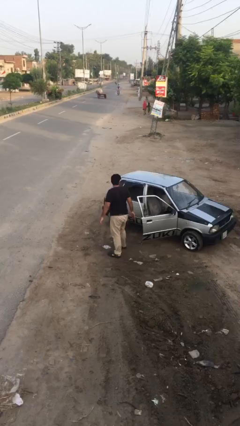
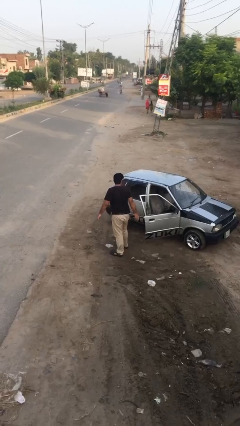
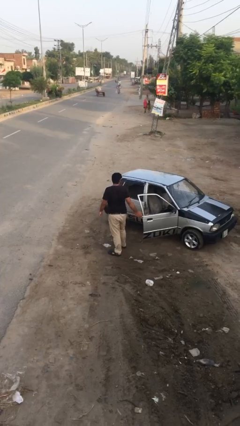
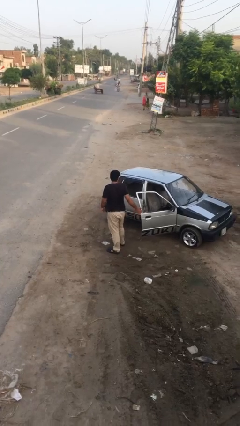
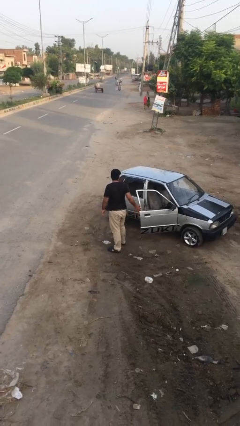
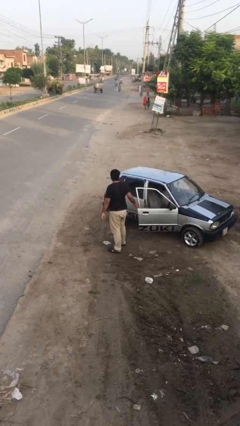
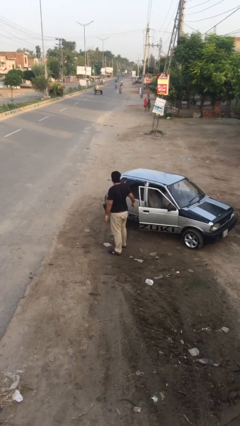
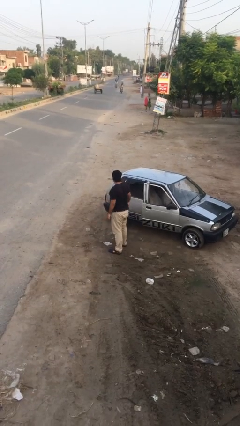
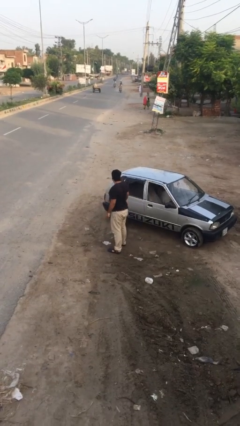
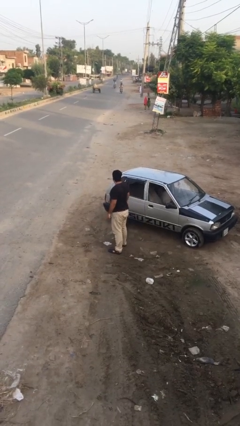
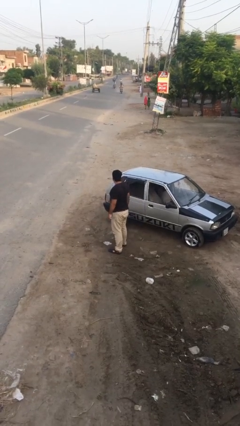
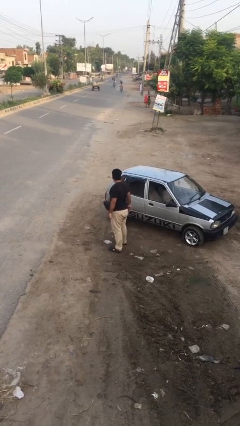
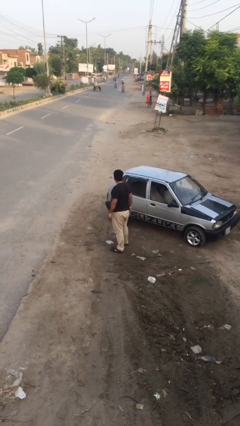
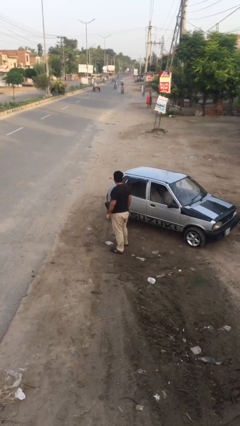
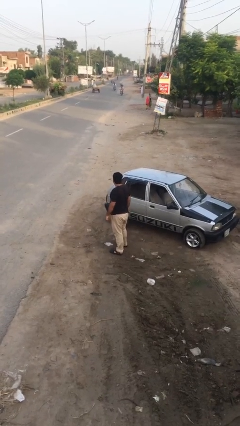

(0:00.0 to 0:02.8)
person closes car door

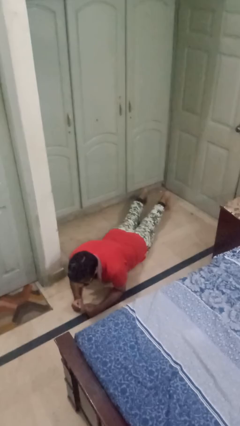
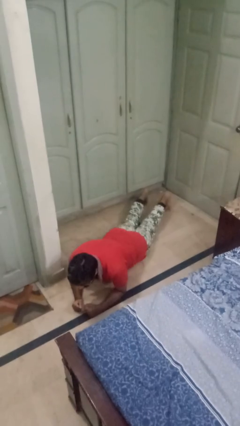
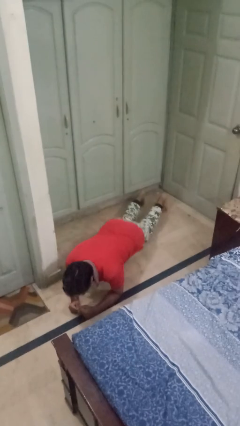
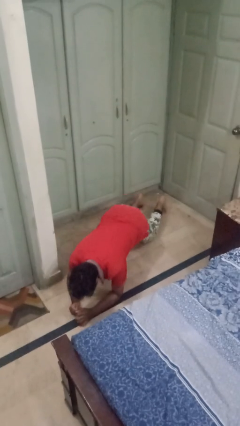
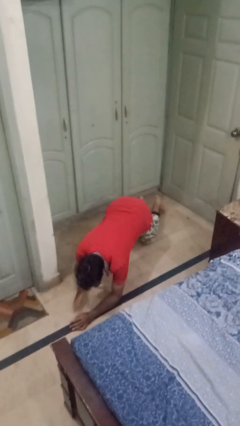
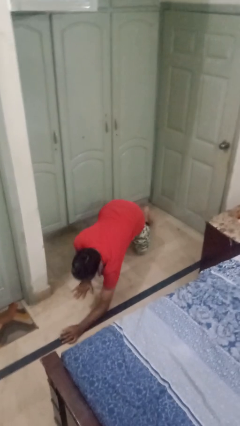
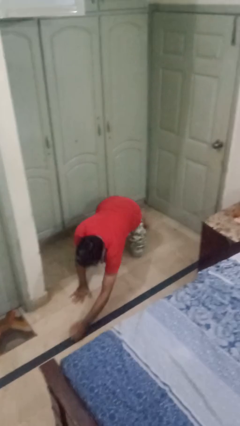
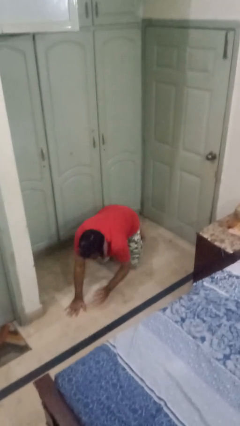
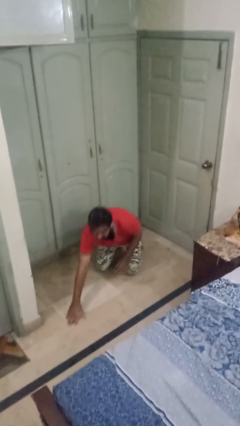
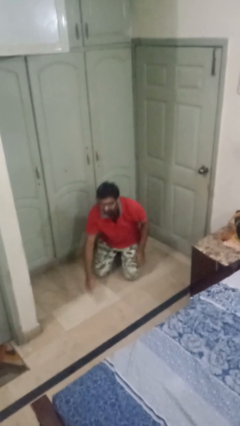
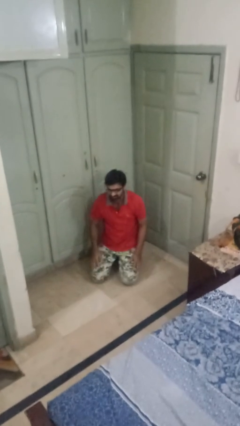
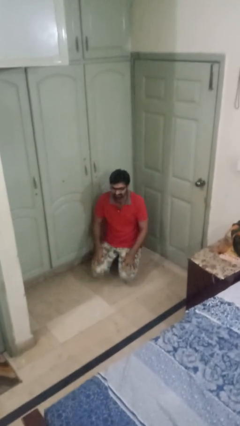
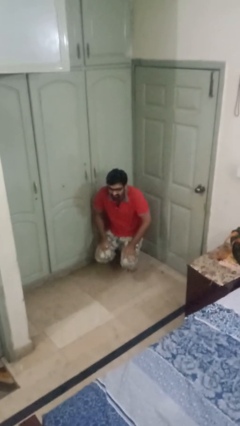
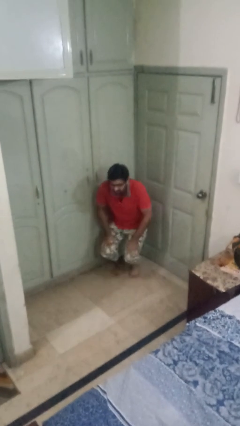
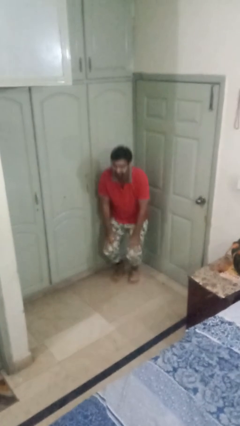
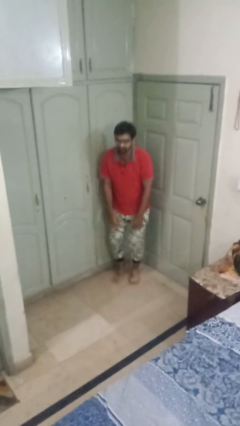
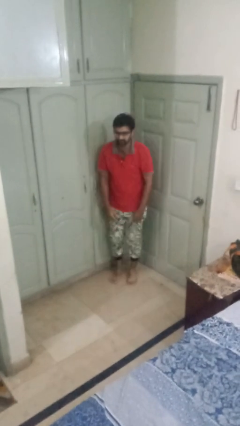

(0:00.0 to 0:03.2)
person stands up from floor

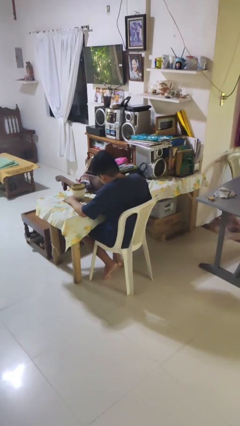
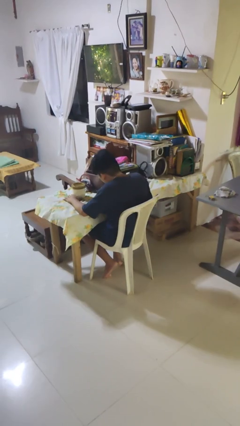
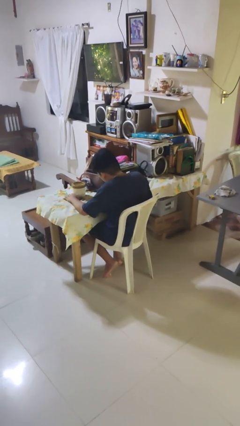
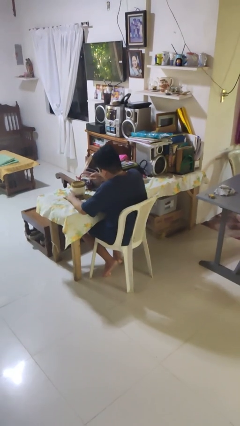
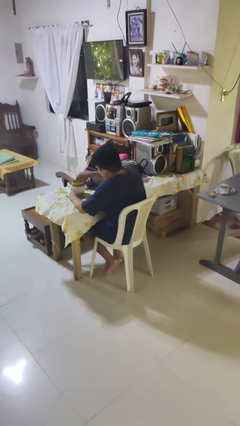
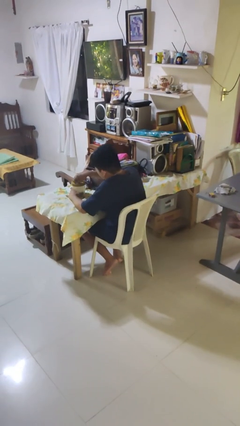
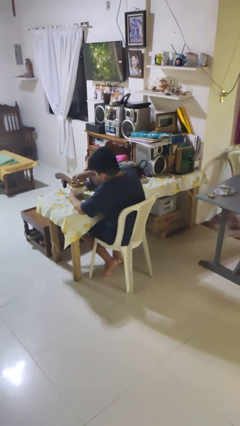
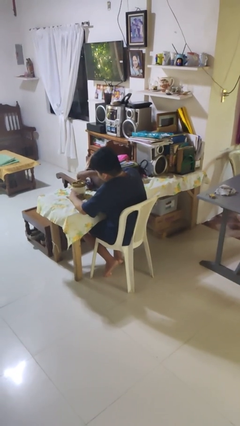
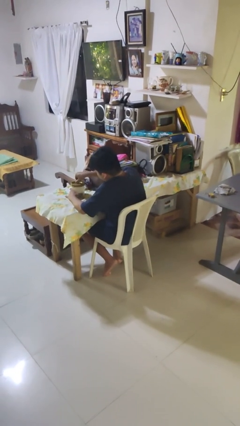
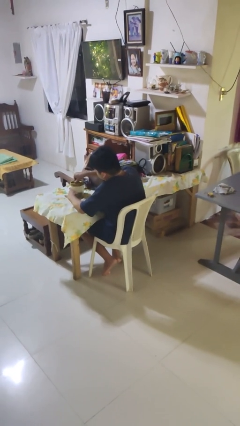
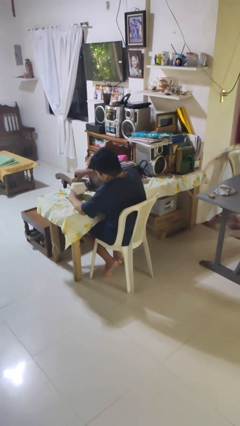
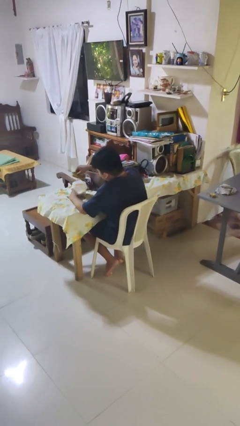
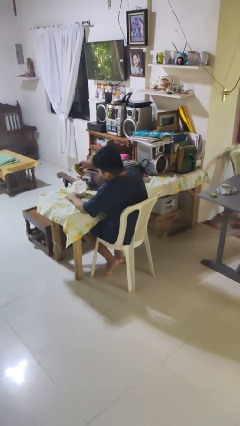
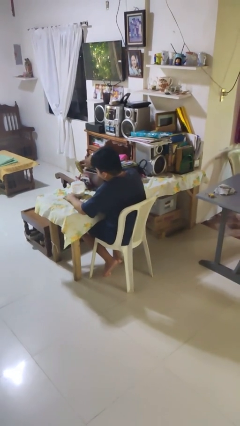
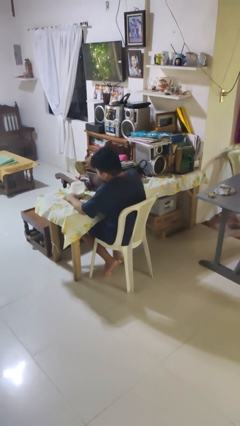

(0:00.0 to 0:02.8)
person opens jar

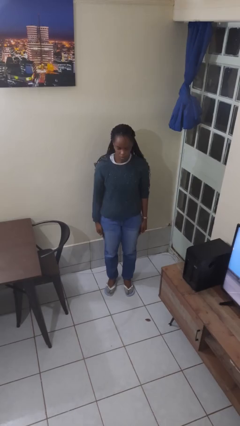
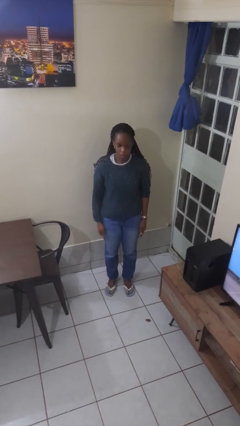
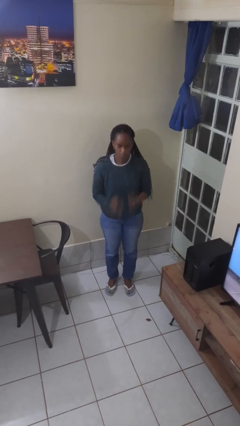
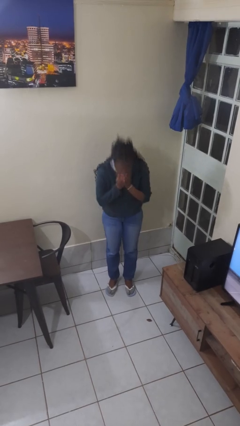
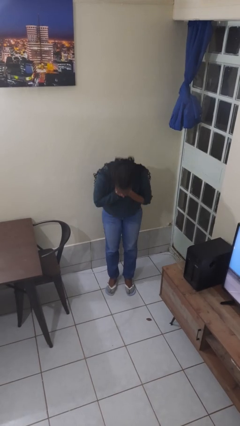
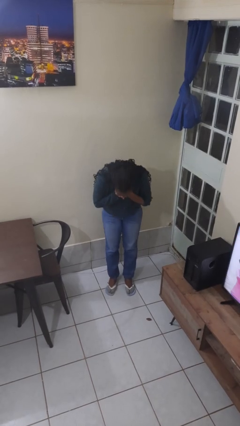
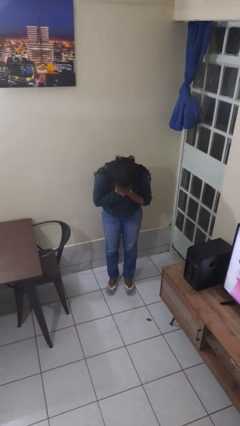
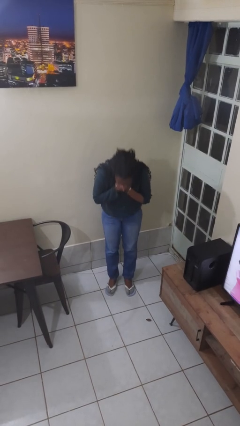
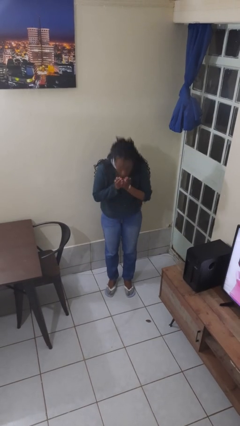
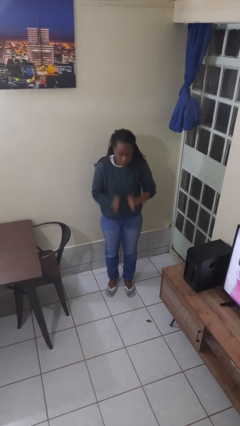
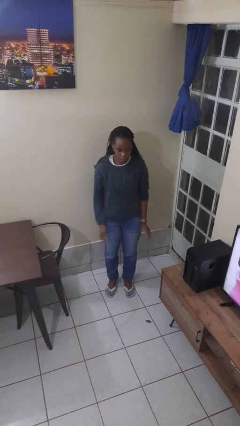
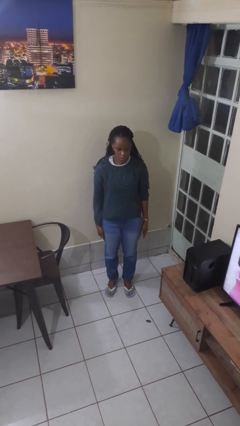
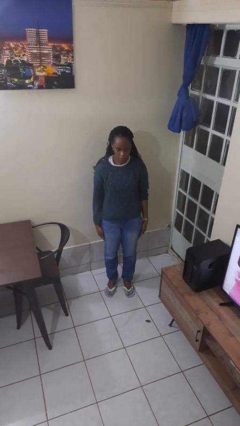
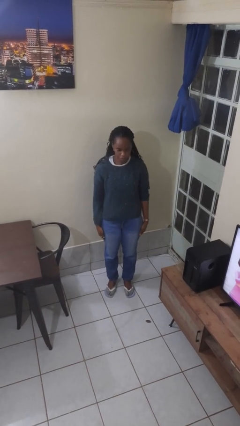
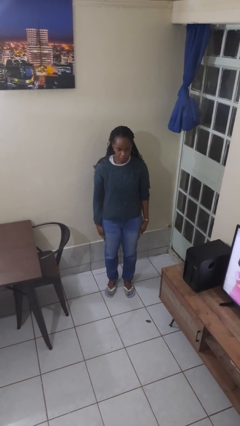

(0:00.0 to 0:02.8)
person sneezes into hand

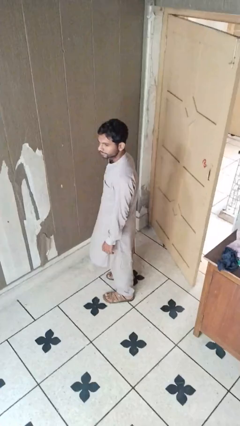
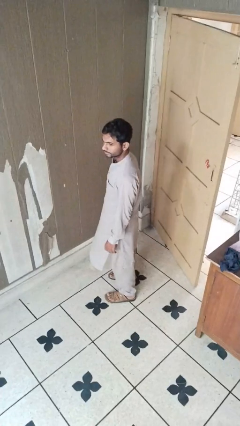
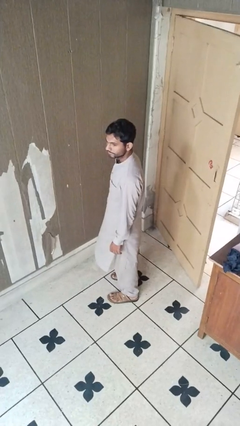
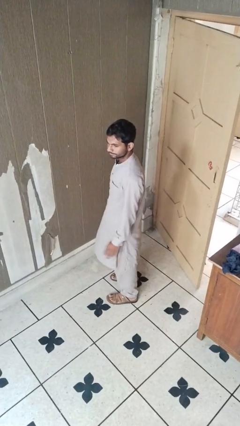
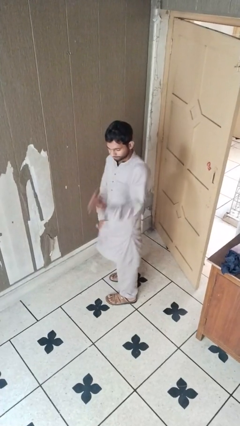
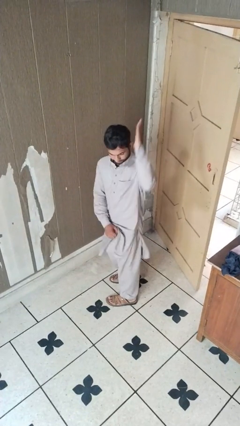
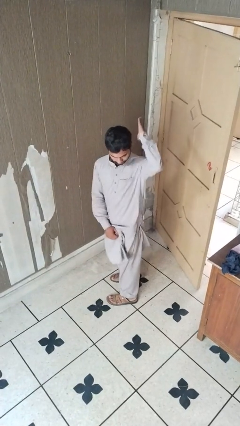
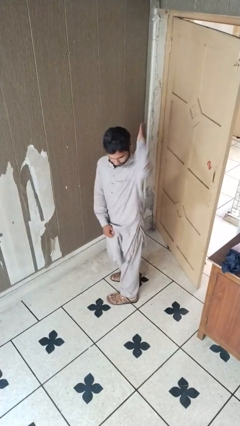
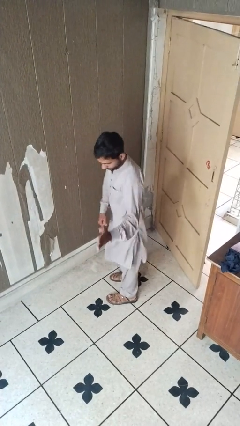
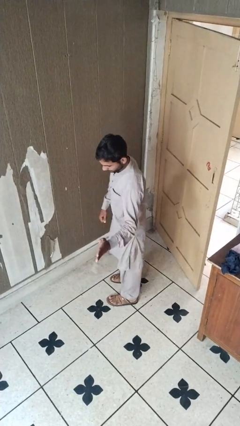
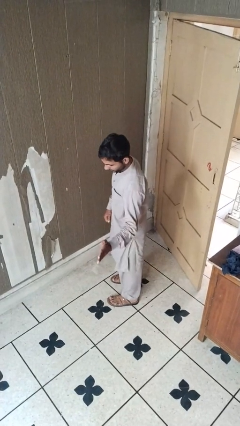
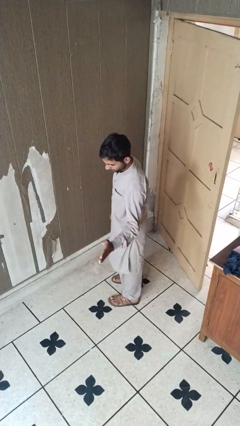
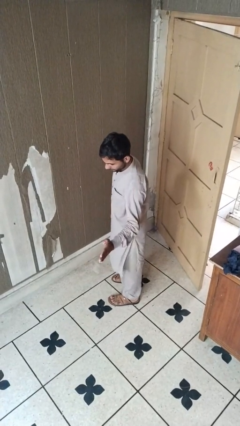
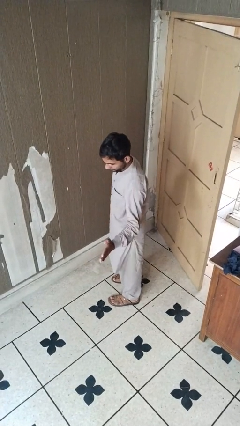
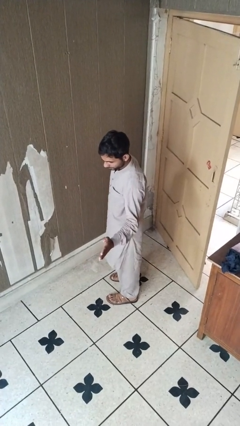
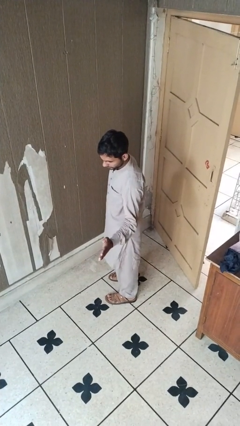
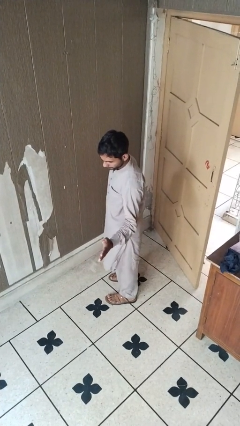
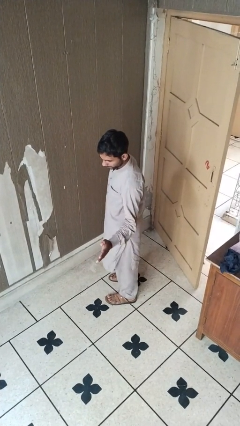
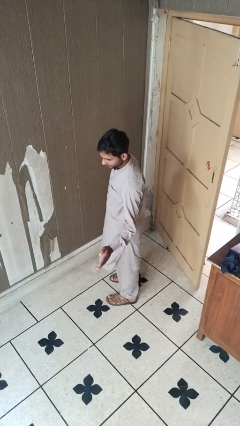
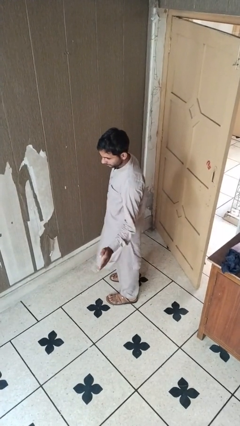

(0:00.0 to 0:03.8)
person karate chop

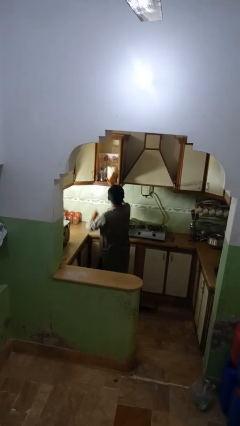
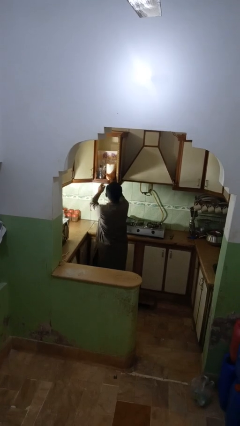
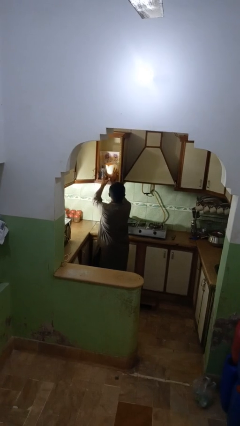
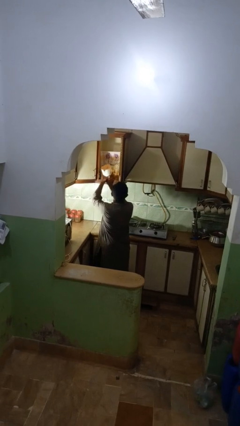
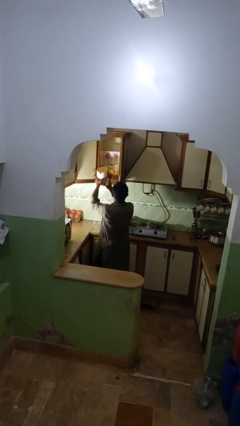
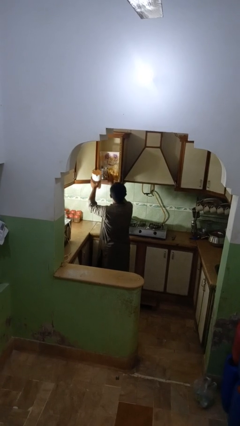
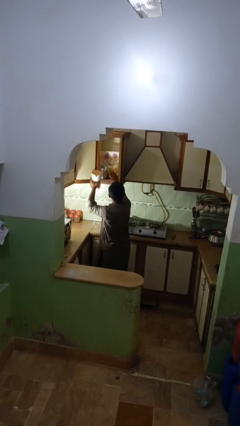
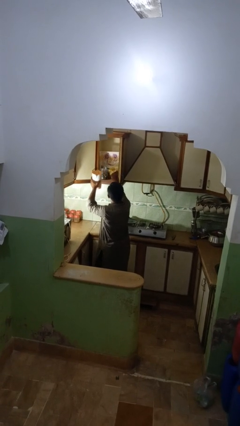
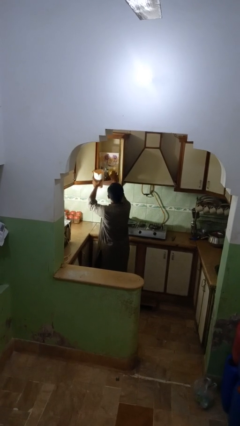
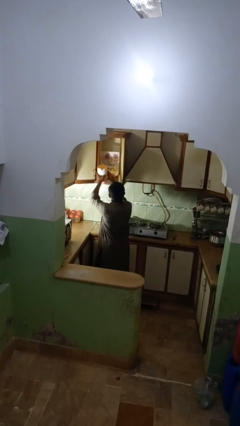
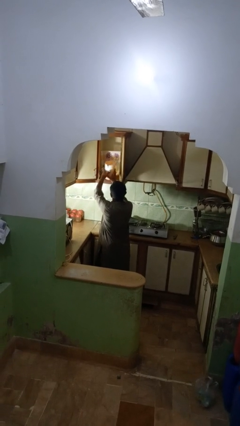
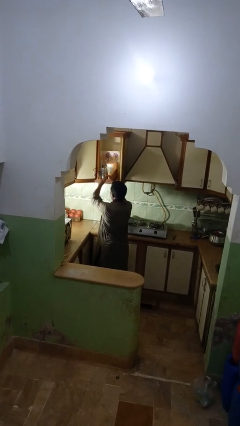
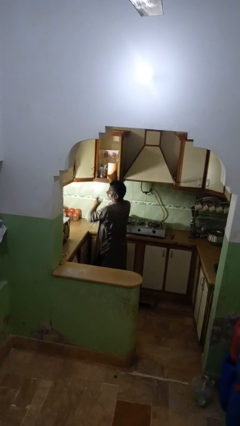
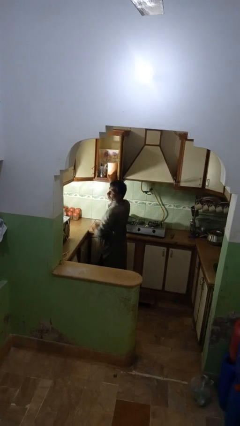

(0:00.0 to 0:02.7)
person searches in kitchen drawer
